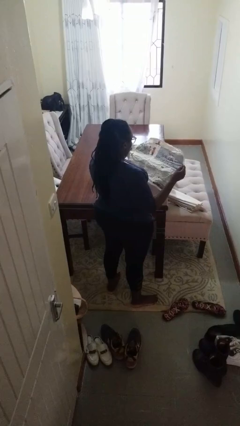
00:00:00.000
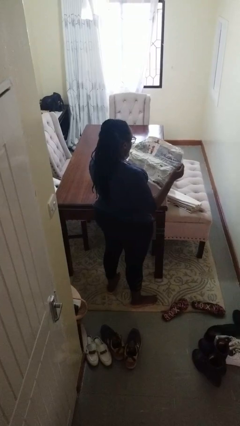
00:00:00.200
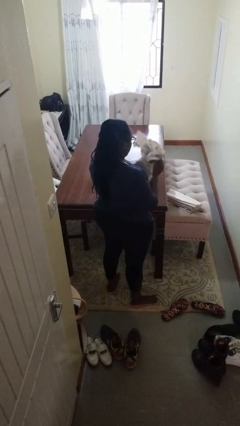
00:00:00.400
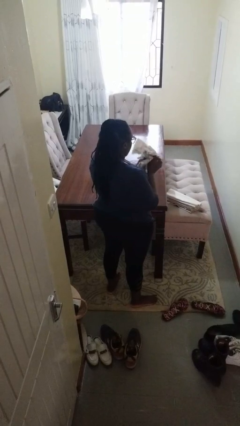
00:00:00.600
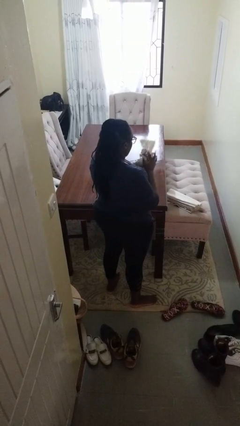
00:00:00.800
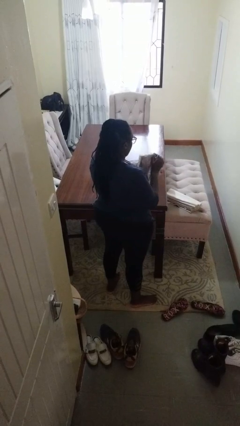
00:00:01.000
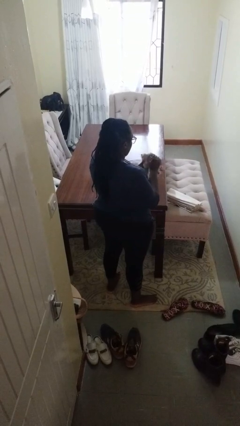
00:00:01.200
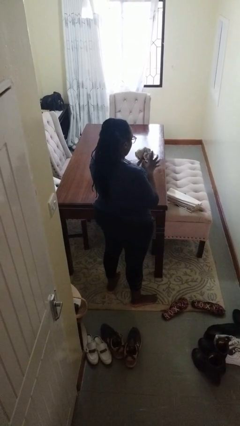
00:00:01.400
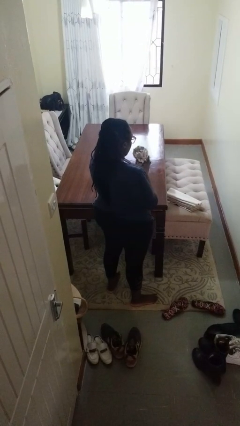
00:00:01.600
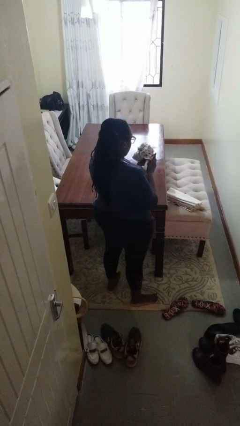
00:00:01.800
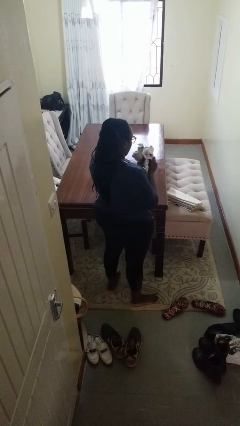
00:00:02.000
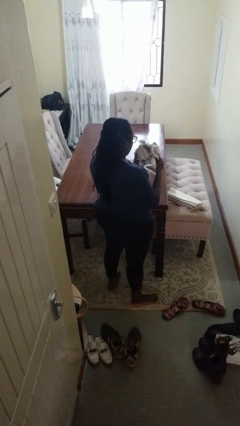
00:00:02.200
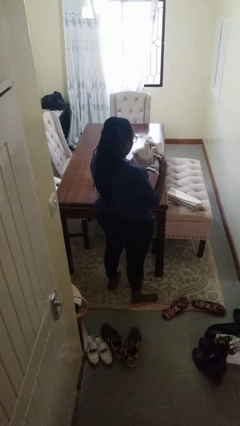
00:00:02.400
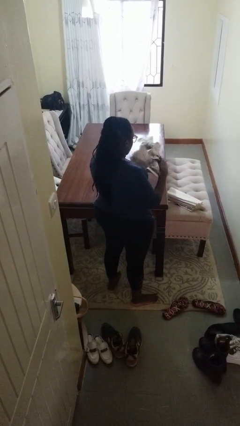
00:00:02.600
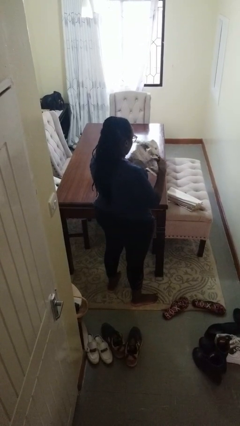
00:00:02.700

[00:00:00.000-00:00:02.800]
person crumples paper

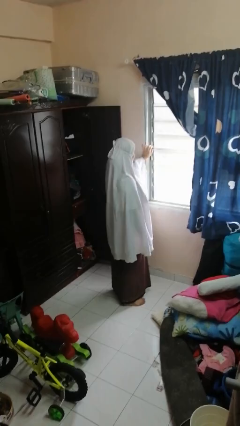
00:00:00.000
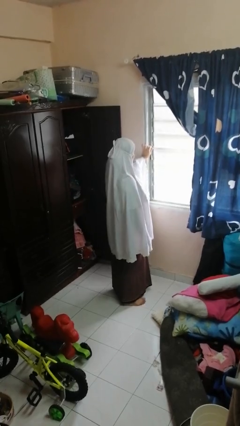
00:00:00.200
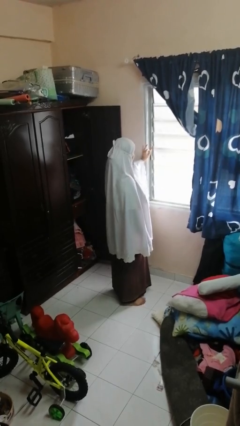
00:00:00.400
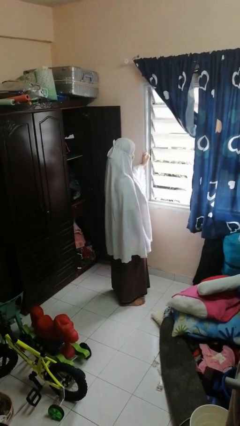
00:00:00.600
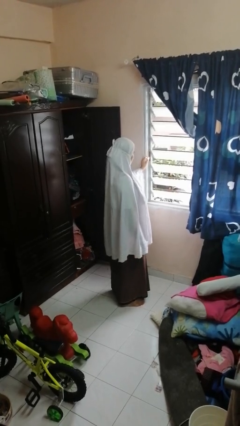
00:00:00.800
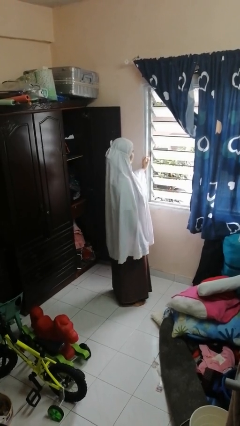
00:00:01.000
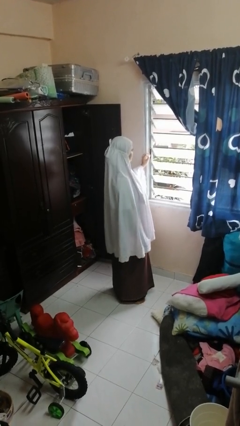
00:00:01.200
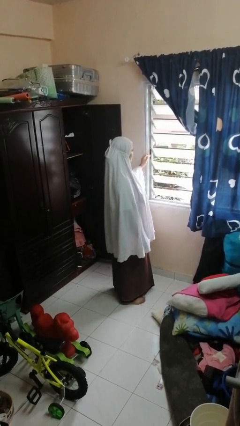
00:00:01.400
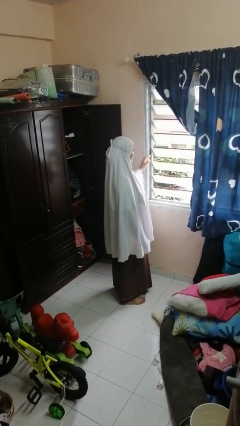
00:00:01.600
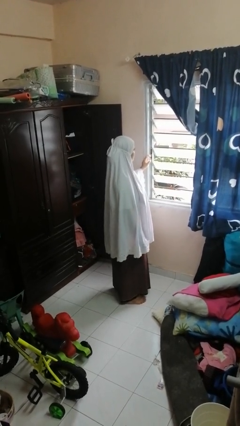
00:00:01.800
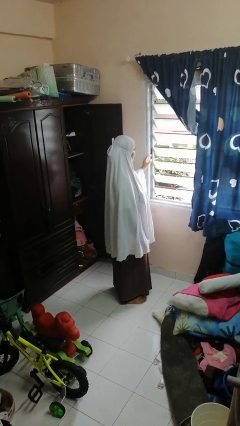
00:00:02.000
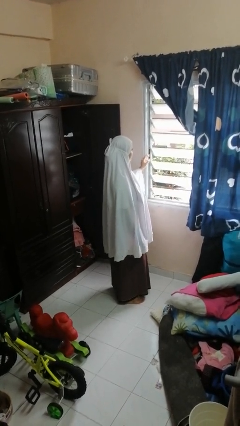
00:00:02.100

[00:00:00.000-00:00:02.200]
person opens home window

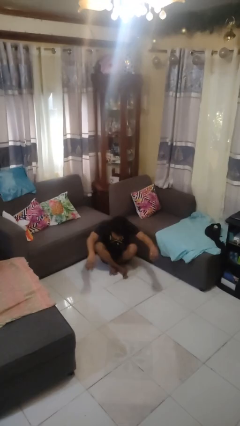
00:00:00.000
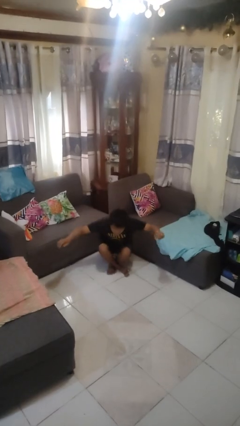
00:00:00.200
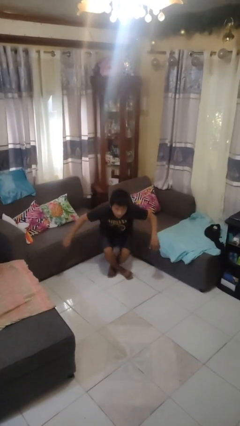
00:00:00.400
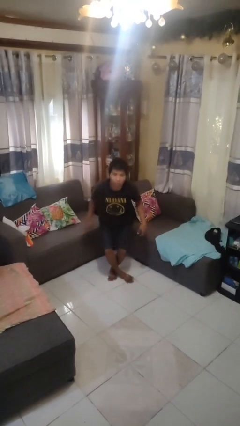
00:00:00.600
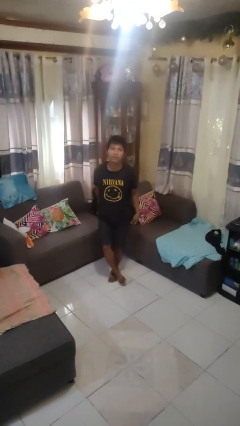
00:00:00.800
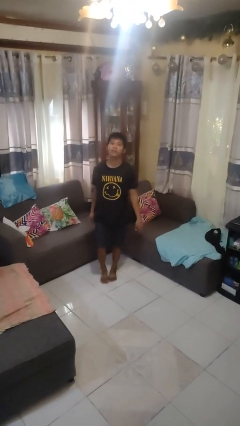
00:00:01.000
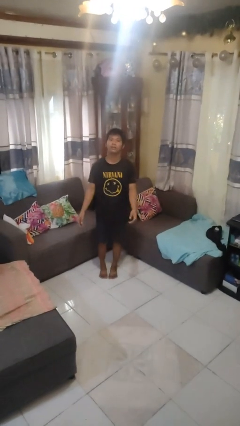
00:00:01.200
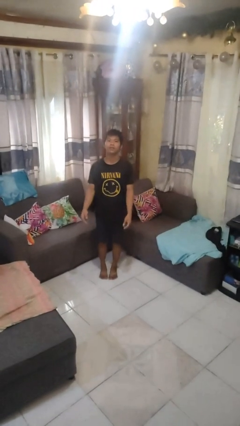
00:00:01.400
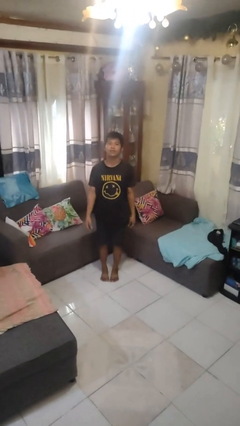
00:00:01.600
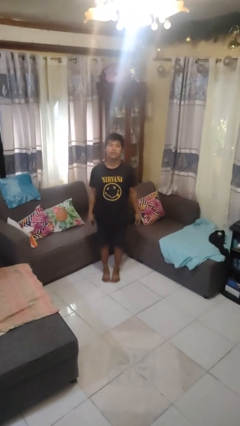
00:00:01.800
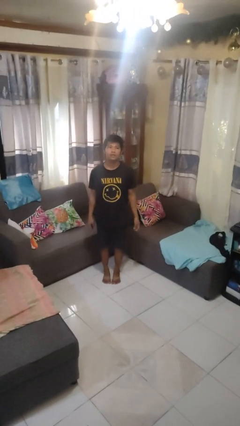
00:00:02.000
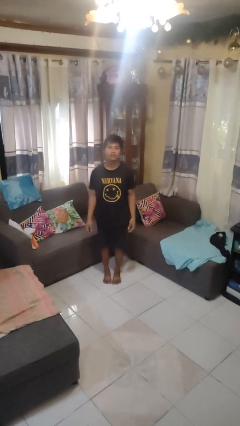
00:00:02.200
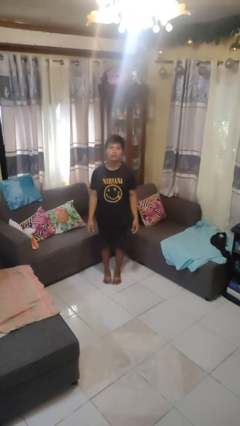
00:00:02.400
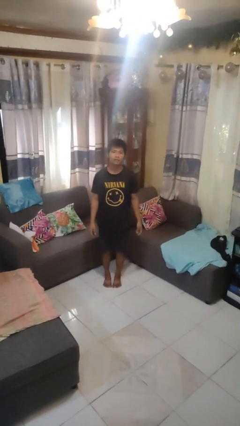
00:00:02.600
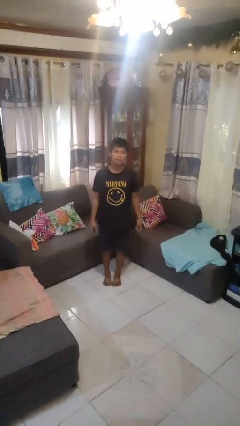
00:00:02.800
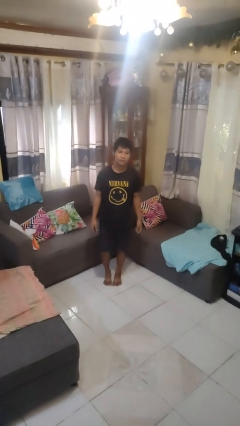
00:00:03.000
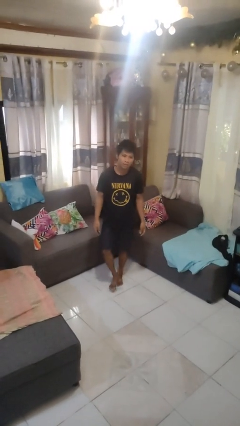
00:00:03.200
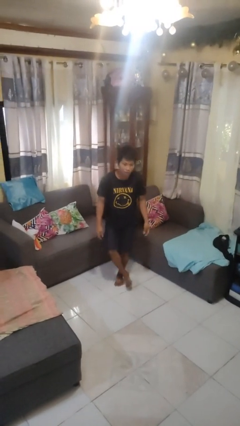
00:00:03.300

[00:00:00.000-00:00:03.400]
person stands up from floor

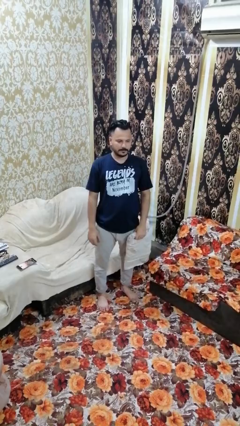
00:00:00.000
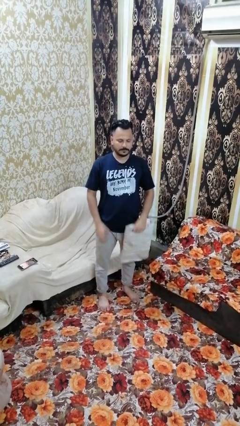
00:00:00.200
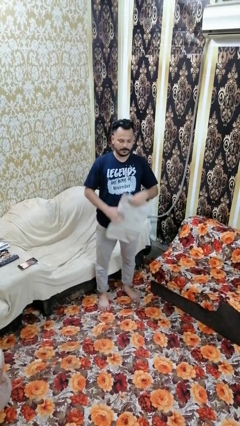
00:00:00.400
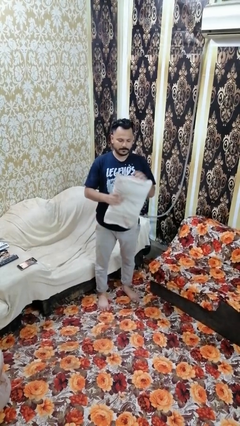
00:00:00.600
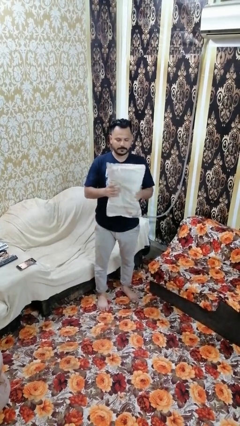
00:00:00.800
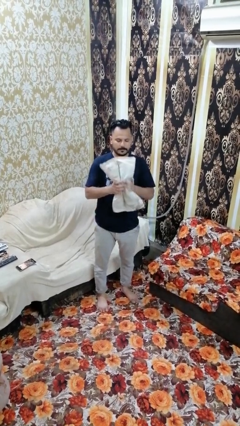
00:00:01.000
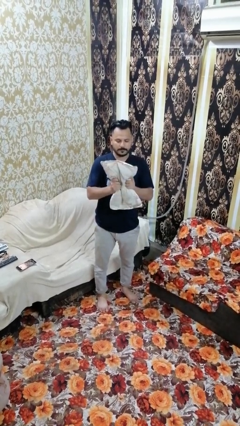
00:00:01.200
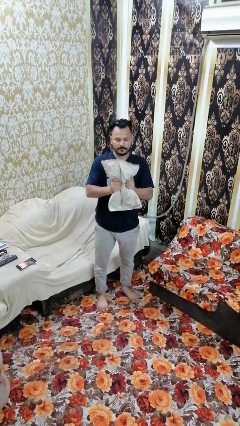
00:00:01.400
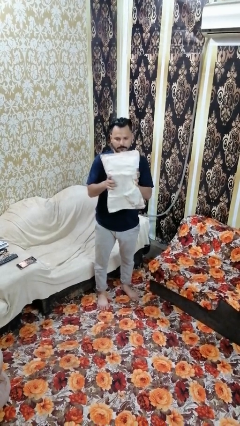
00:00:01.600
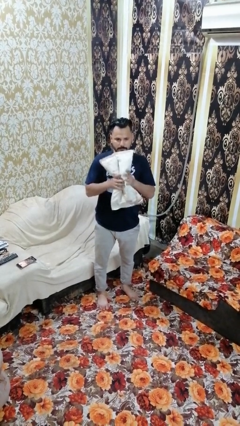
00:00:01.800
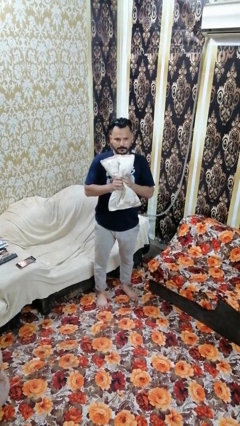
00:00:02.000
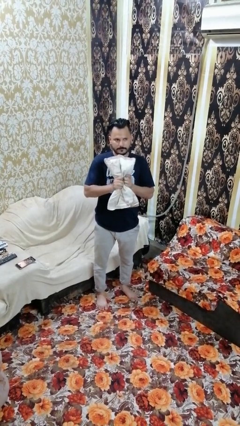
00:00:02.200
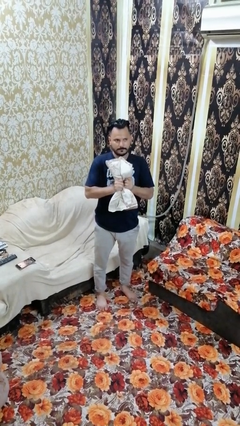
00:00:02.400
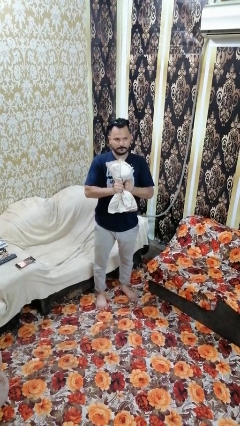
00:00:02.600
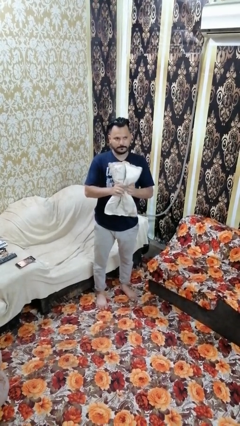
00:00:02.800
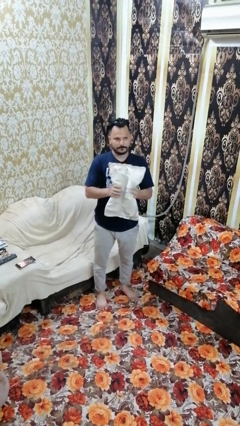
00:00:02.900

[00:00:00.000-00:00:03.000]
person squeezes object

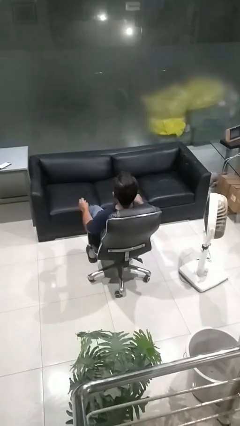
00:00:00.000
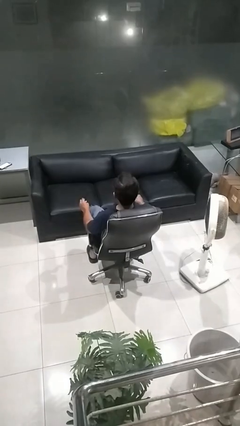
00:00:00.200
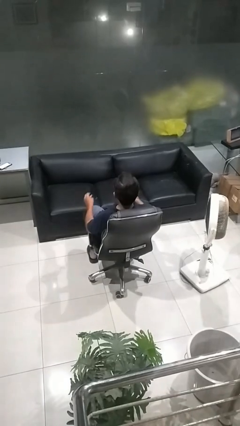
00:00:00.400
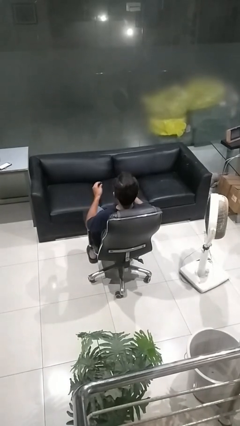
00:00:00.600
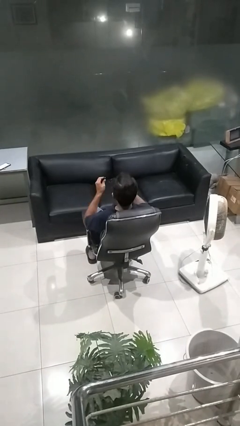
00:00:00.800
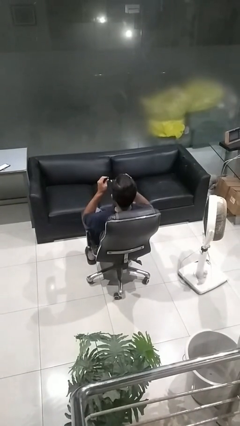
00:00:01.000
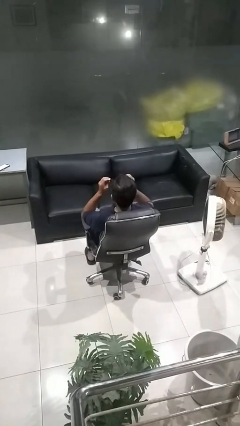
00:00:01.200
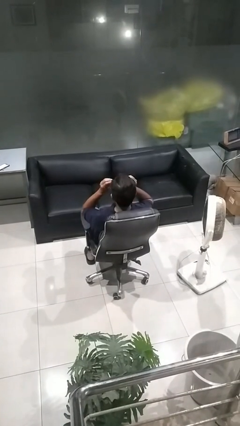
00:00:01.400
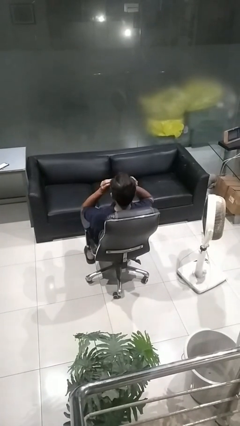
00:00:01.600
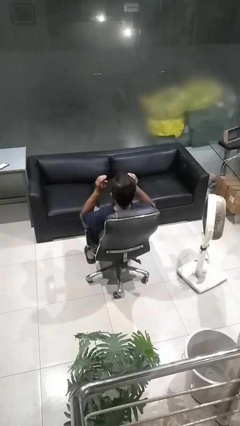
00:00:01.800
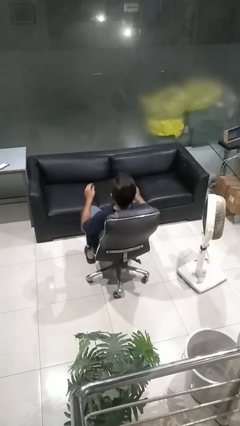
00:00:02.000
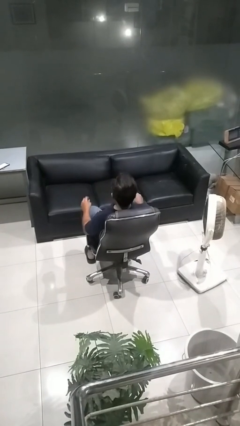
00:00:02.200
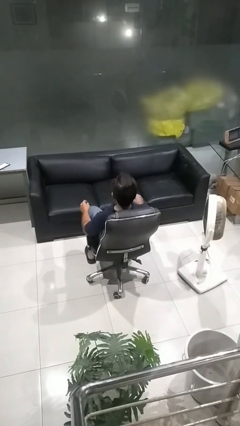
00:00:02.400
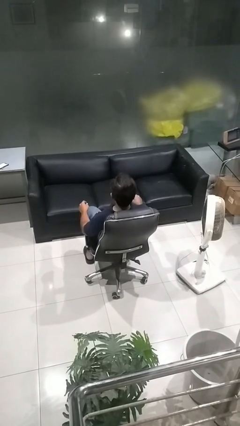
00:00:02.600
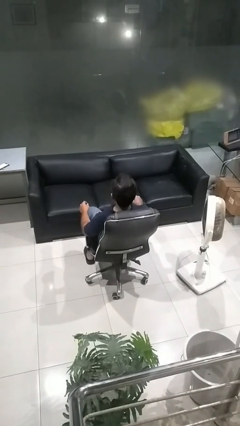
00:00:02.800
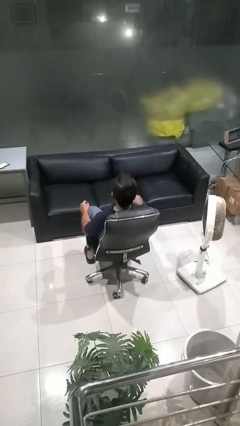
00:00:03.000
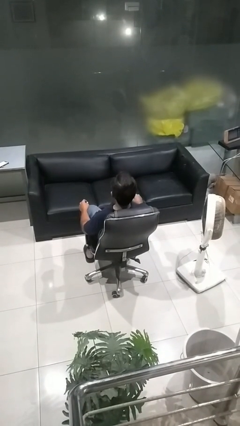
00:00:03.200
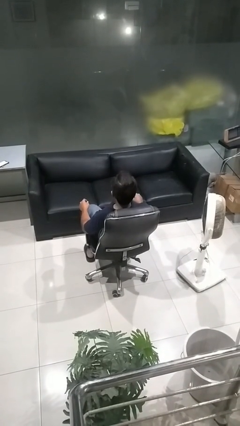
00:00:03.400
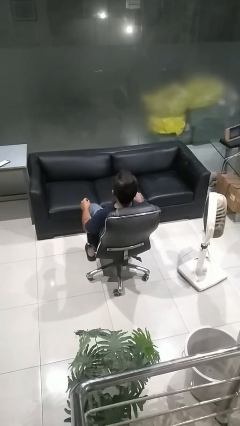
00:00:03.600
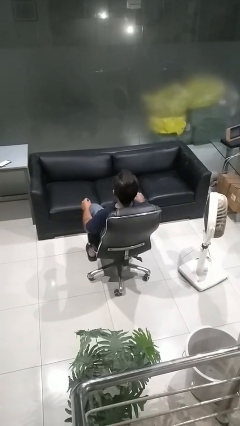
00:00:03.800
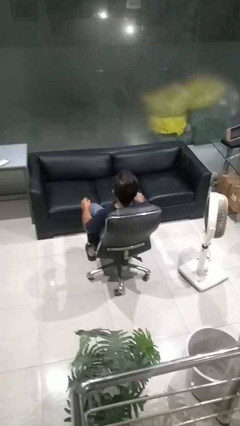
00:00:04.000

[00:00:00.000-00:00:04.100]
person puts on sunglasses

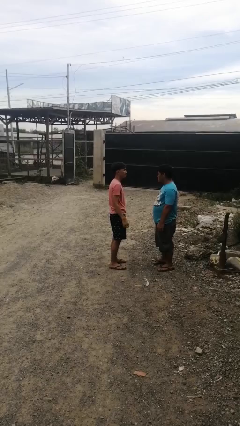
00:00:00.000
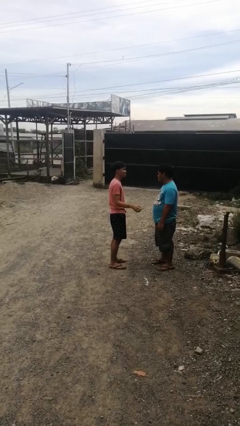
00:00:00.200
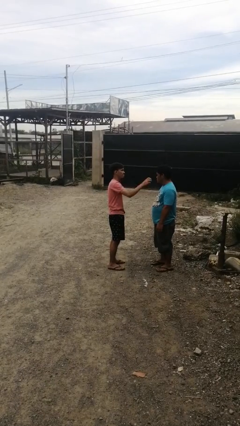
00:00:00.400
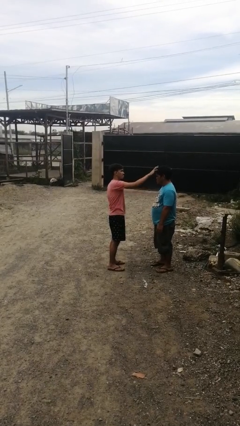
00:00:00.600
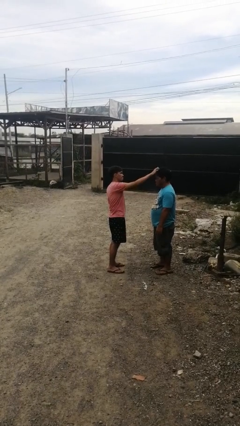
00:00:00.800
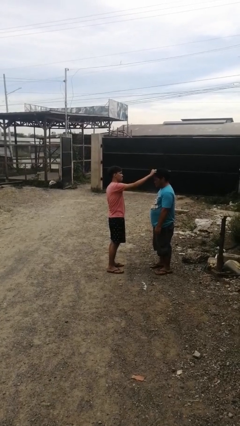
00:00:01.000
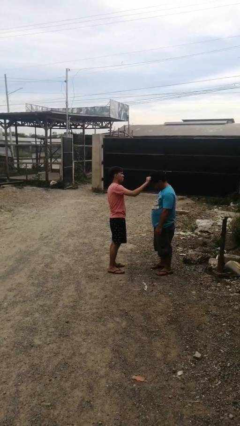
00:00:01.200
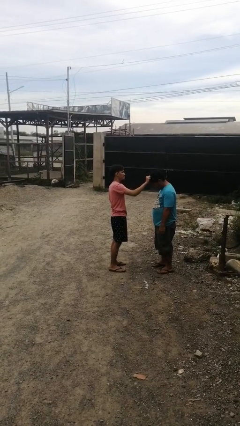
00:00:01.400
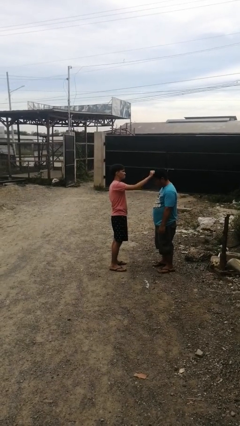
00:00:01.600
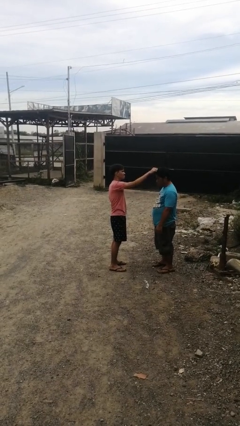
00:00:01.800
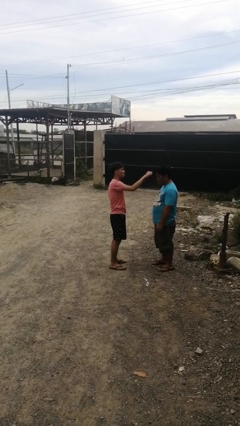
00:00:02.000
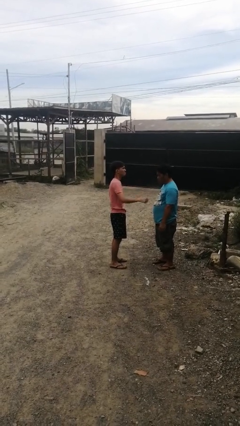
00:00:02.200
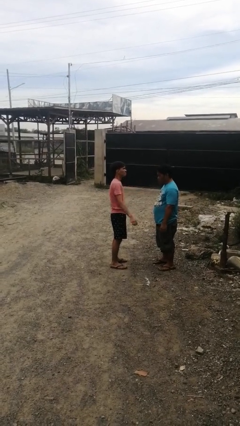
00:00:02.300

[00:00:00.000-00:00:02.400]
person grabs person by hair
